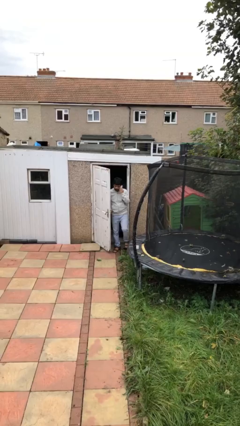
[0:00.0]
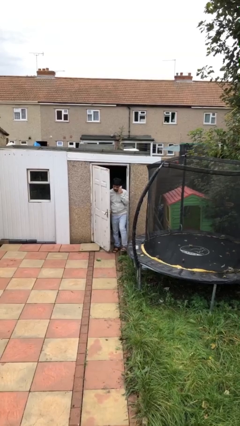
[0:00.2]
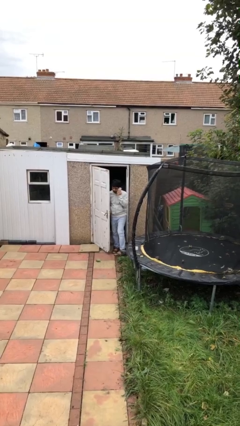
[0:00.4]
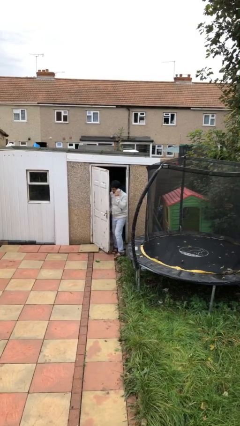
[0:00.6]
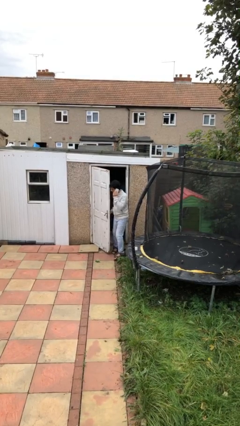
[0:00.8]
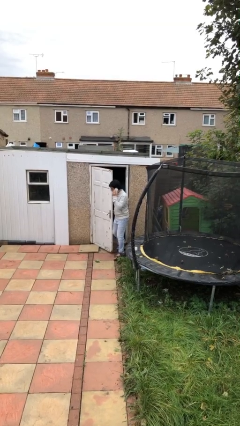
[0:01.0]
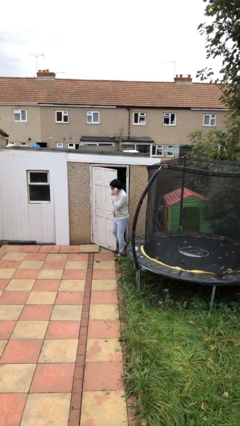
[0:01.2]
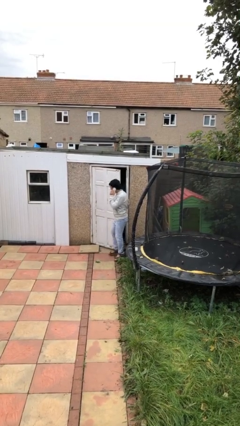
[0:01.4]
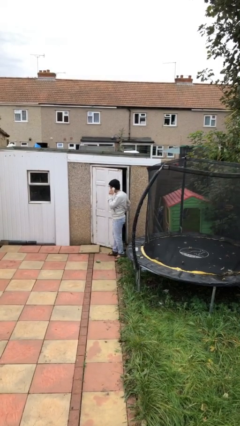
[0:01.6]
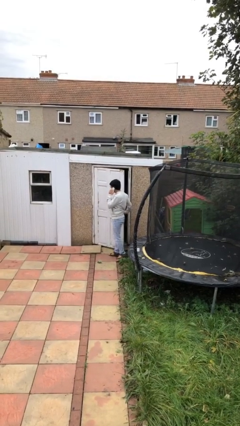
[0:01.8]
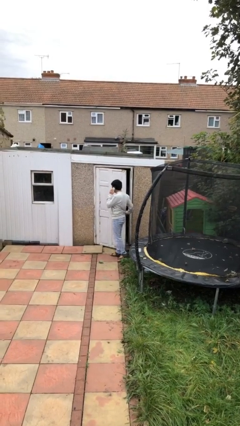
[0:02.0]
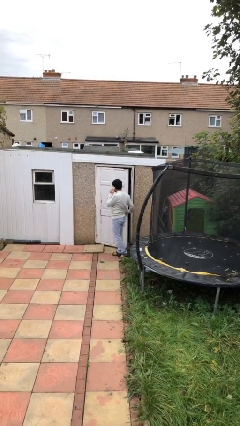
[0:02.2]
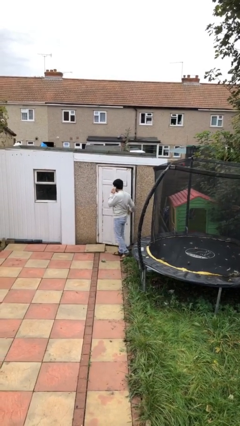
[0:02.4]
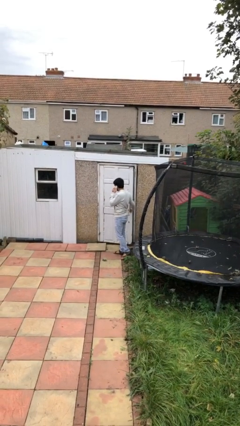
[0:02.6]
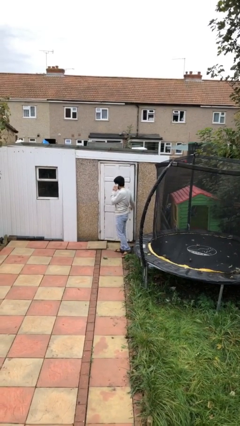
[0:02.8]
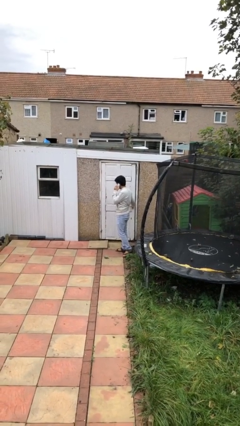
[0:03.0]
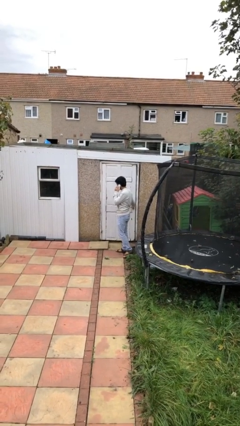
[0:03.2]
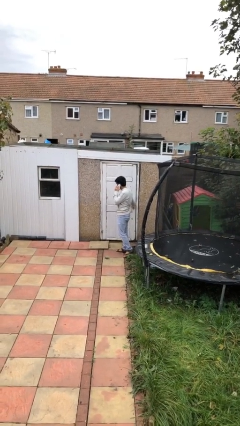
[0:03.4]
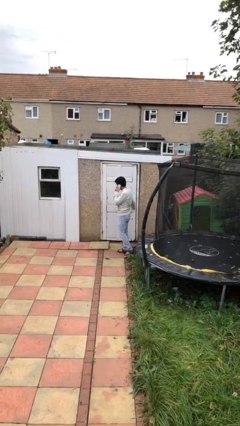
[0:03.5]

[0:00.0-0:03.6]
person closes facility door

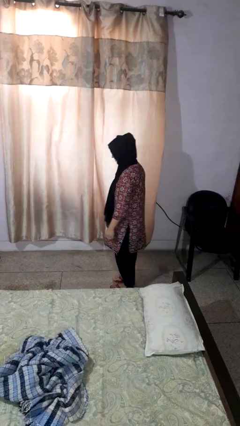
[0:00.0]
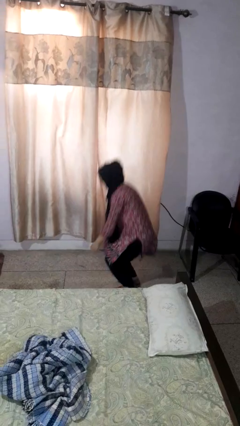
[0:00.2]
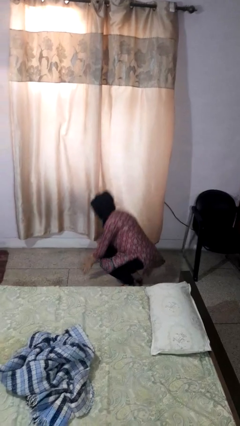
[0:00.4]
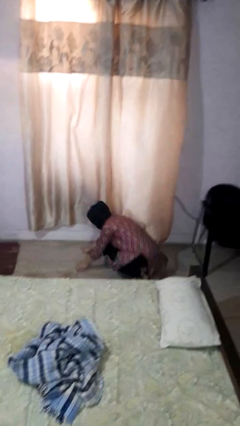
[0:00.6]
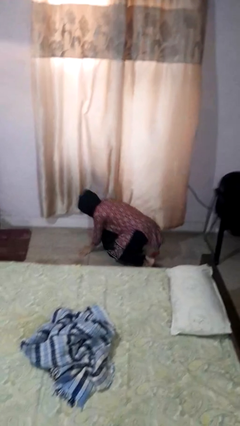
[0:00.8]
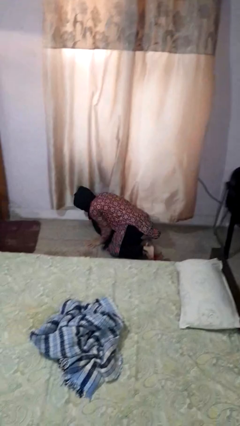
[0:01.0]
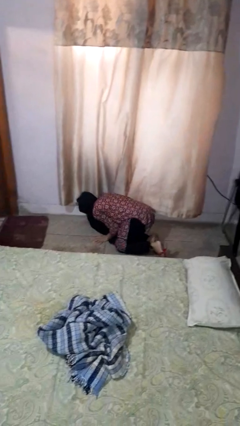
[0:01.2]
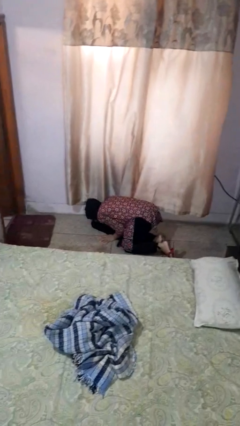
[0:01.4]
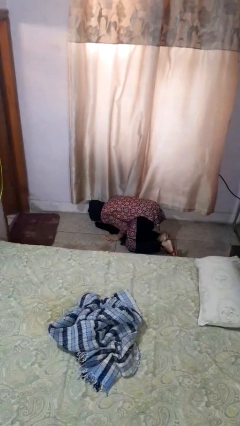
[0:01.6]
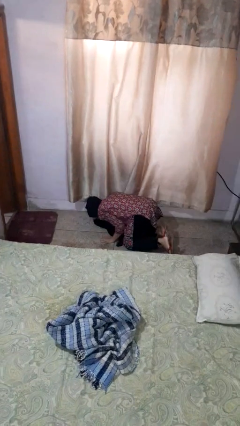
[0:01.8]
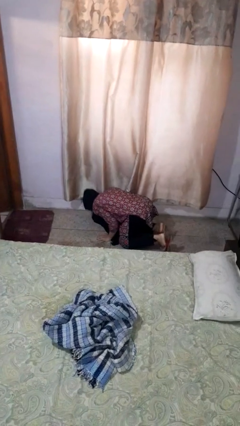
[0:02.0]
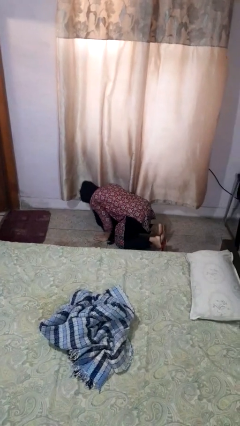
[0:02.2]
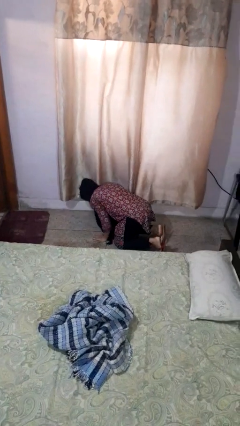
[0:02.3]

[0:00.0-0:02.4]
person falls while standing

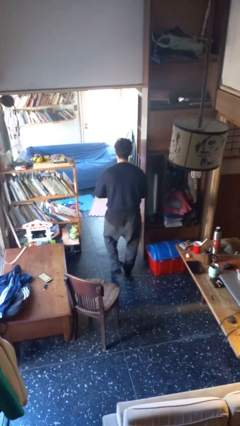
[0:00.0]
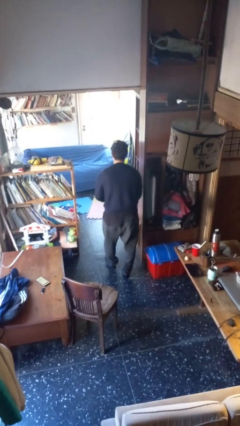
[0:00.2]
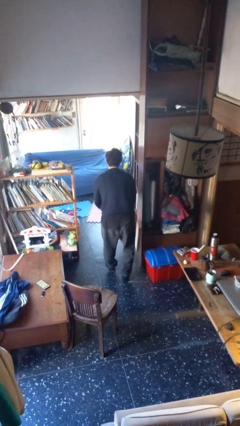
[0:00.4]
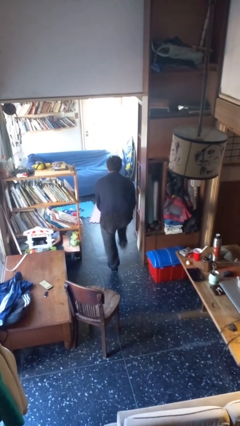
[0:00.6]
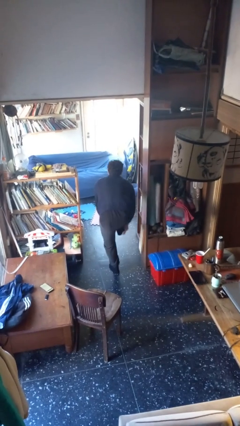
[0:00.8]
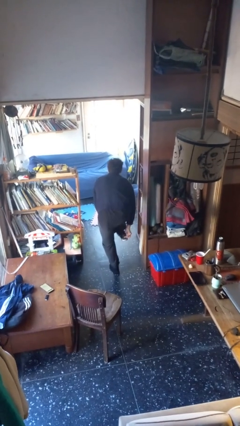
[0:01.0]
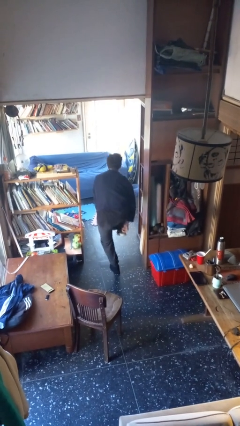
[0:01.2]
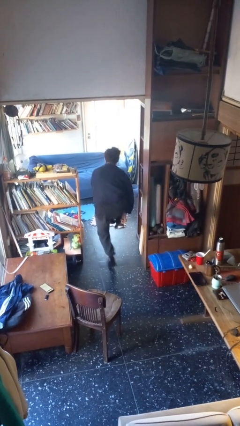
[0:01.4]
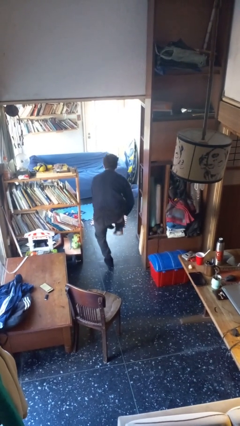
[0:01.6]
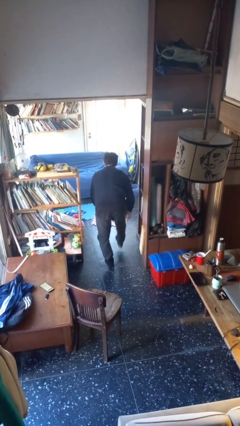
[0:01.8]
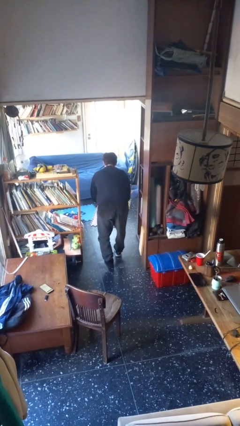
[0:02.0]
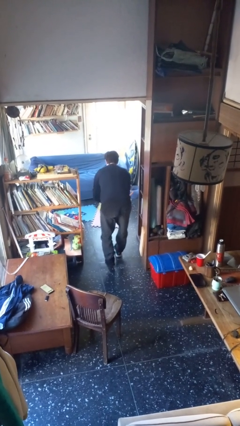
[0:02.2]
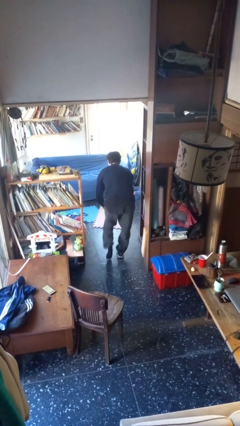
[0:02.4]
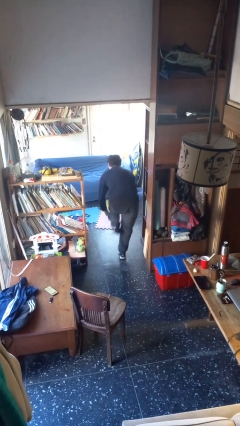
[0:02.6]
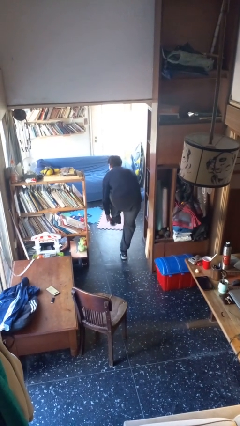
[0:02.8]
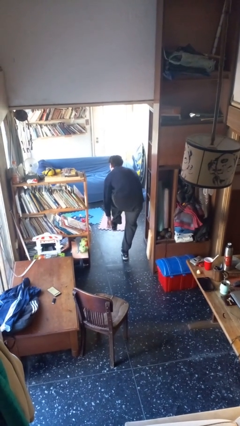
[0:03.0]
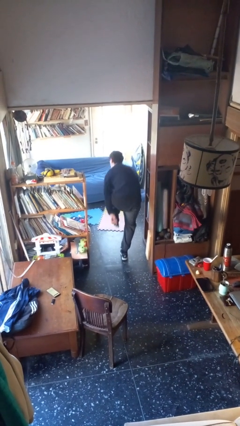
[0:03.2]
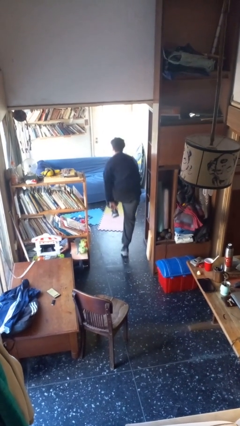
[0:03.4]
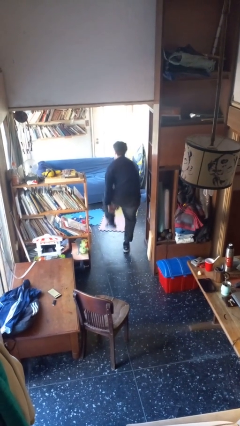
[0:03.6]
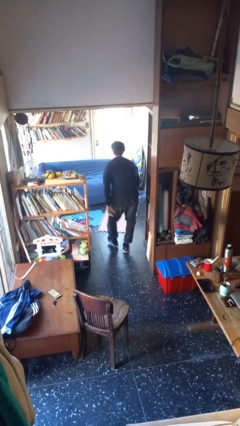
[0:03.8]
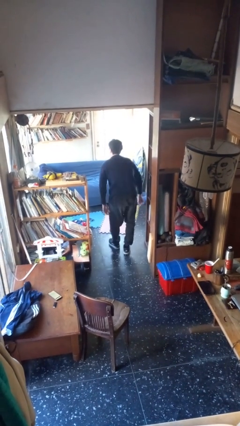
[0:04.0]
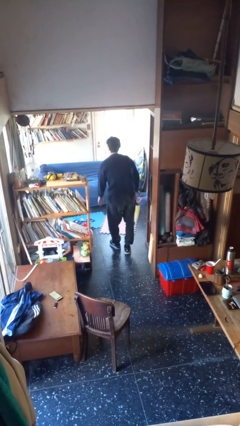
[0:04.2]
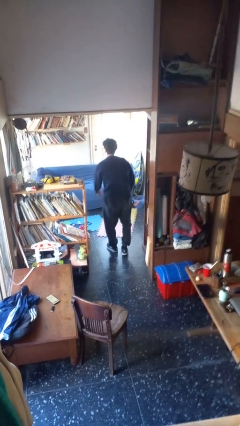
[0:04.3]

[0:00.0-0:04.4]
person puts on shoes

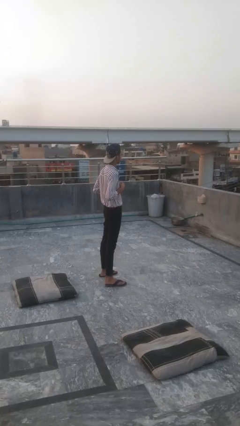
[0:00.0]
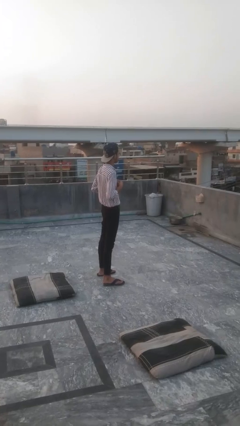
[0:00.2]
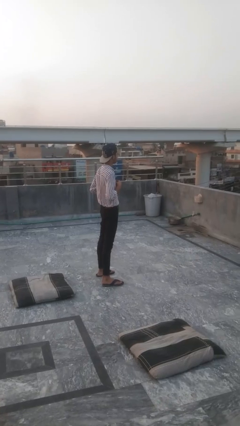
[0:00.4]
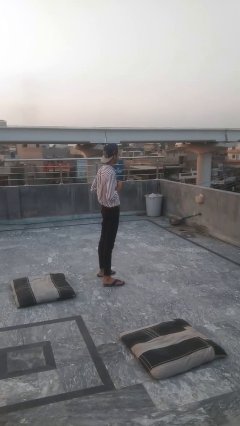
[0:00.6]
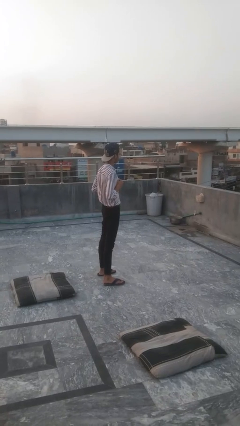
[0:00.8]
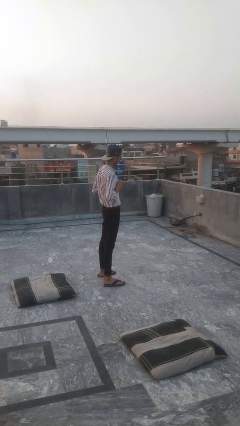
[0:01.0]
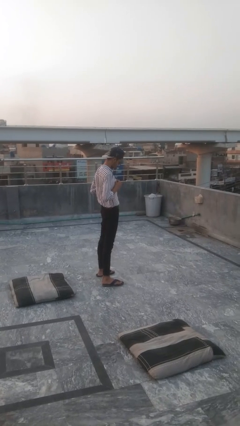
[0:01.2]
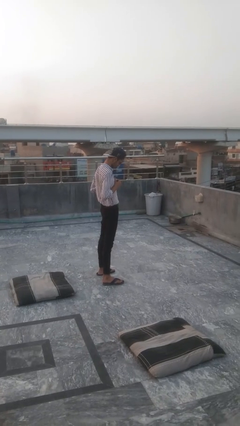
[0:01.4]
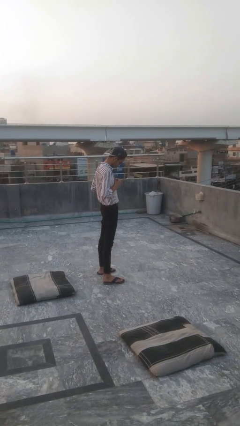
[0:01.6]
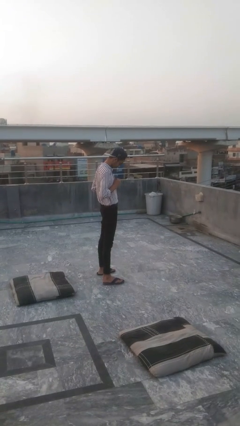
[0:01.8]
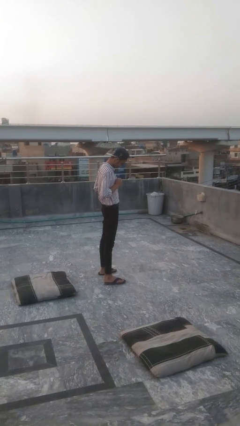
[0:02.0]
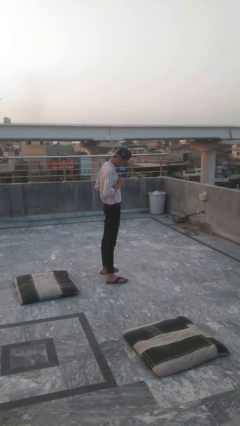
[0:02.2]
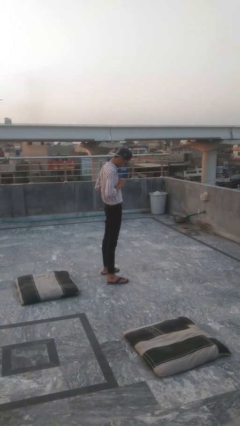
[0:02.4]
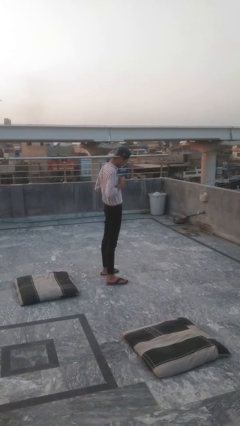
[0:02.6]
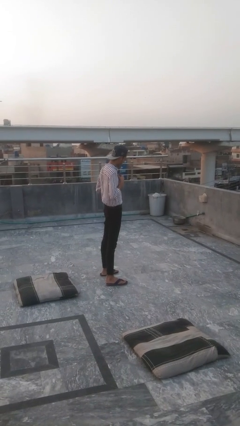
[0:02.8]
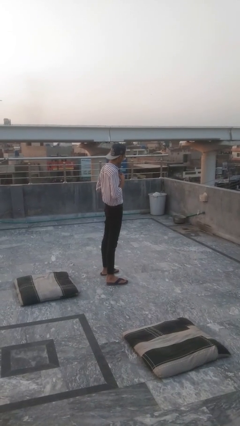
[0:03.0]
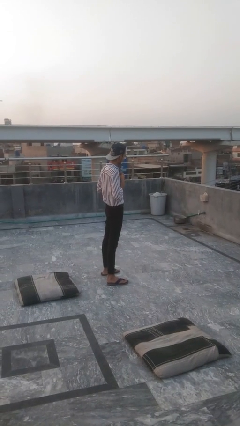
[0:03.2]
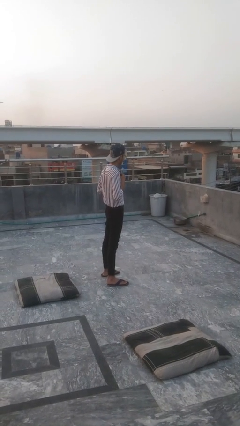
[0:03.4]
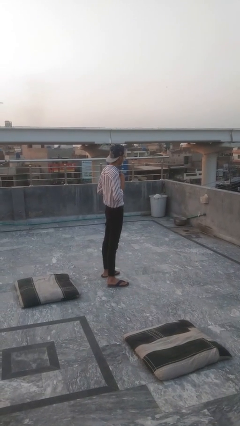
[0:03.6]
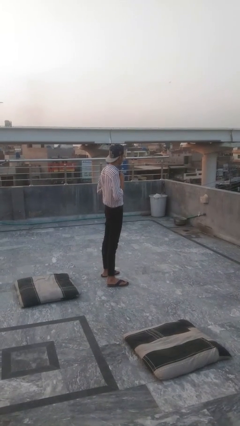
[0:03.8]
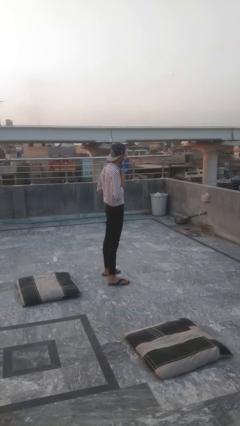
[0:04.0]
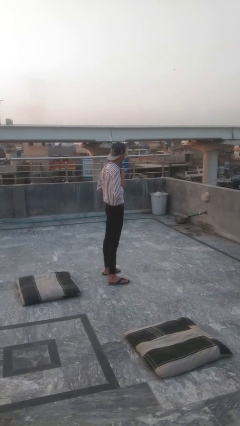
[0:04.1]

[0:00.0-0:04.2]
person buttons shirt

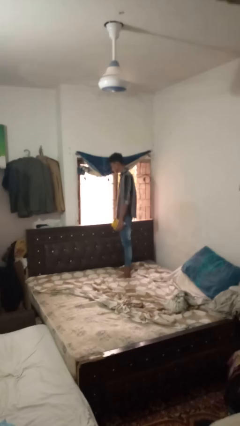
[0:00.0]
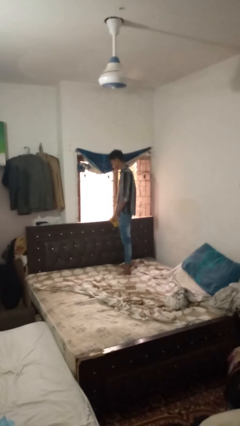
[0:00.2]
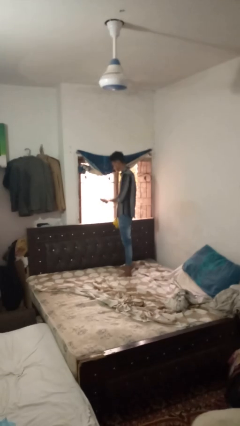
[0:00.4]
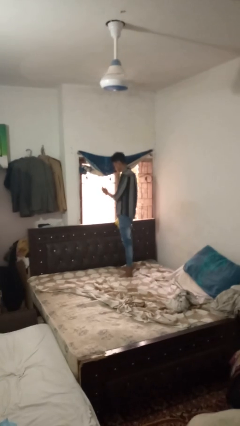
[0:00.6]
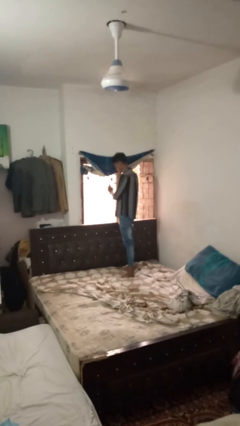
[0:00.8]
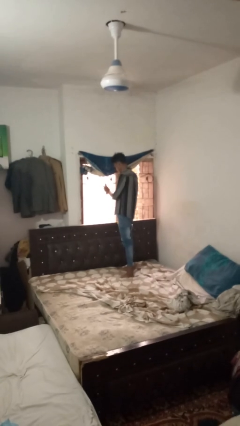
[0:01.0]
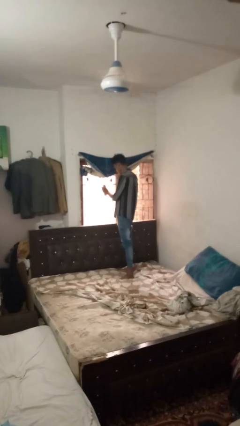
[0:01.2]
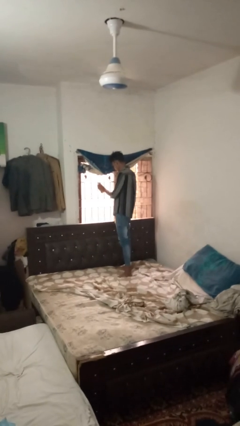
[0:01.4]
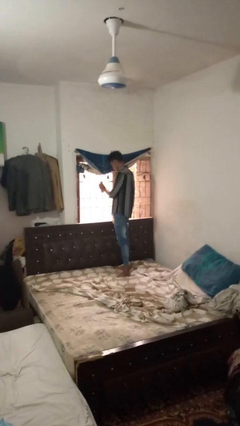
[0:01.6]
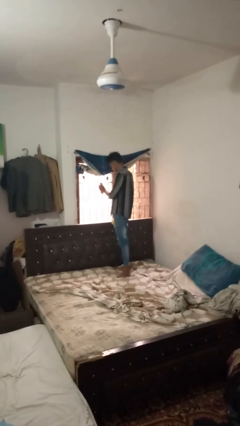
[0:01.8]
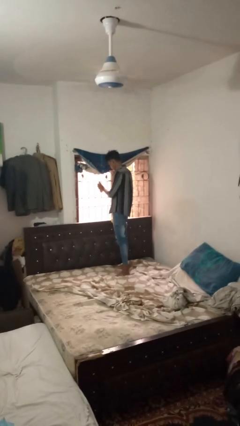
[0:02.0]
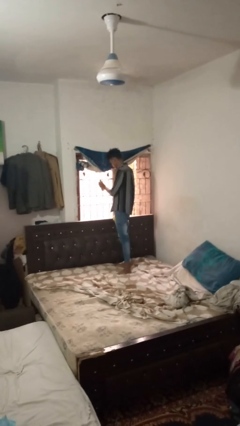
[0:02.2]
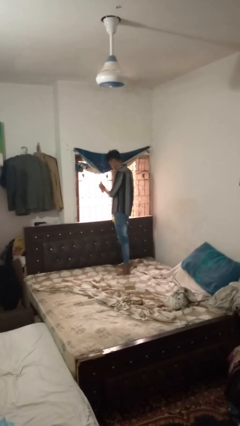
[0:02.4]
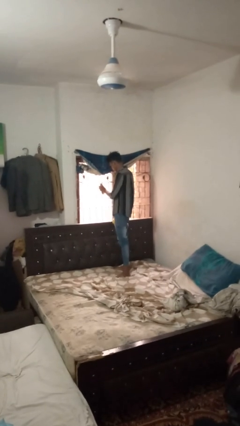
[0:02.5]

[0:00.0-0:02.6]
person sprays from bottle
